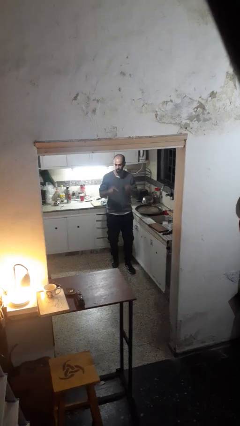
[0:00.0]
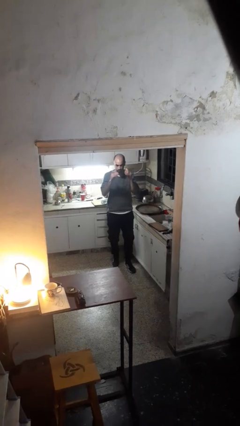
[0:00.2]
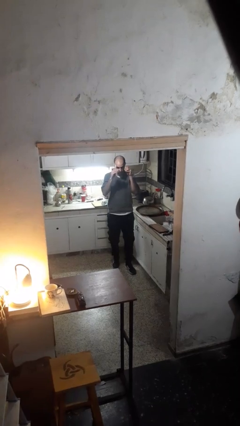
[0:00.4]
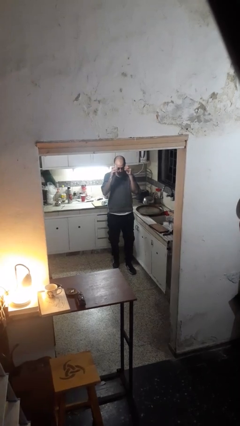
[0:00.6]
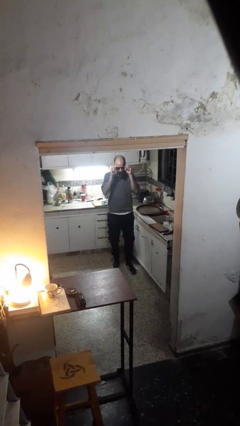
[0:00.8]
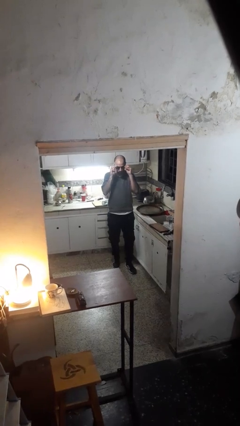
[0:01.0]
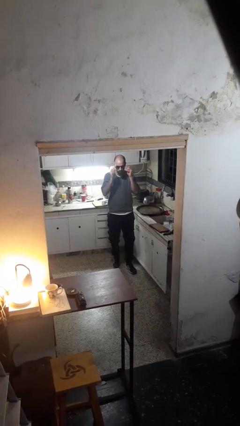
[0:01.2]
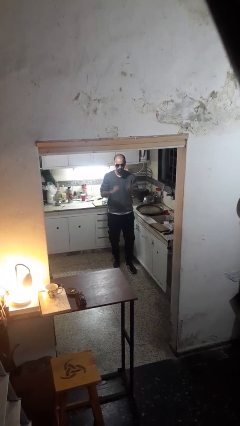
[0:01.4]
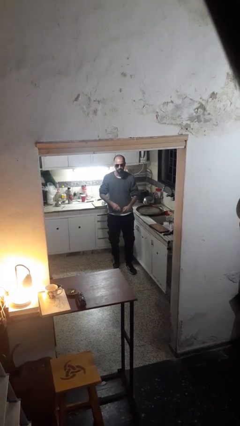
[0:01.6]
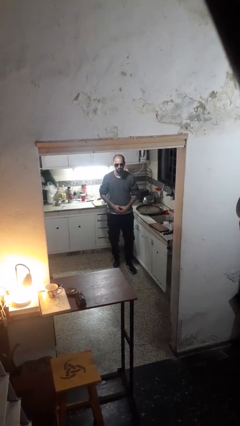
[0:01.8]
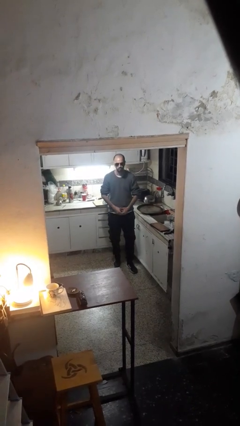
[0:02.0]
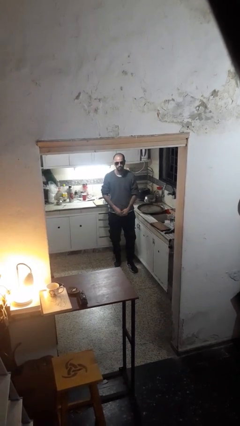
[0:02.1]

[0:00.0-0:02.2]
person puts on sunglasses

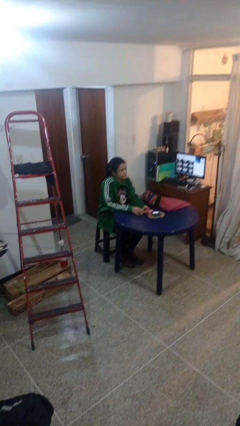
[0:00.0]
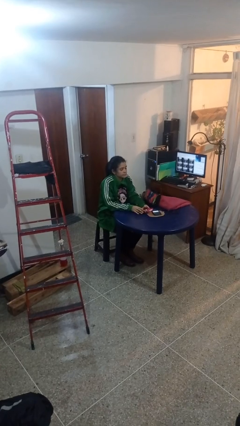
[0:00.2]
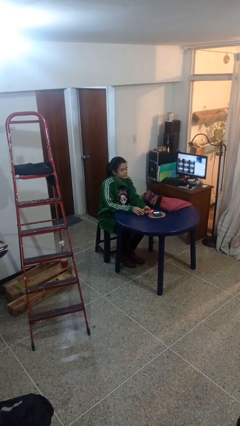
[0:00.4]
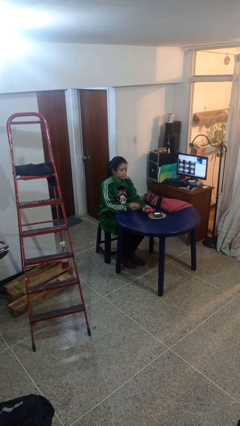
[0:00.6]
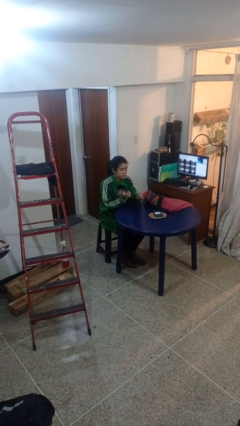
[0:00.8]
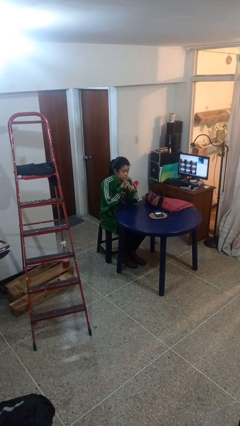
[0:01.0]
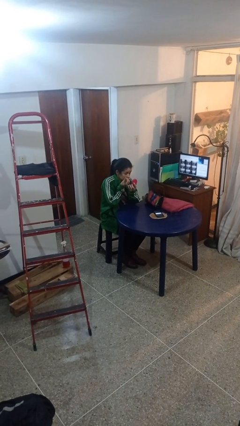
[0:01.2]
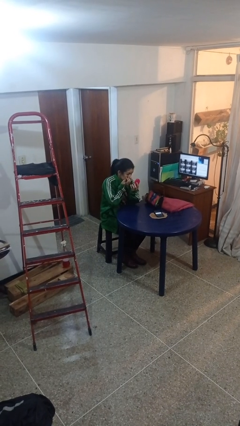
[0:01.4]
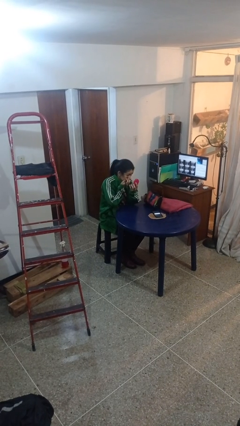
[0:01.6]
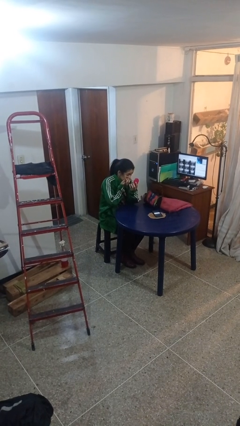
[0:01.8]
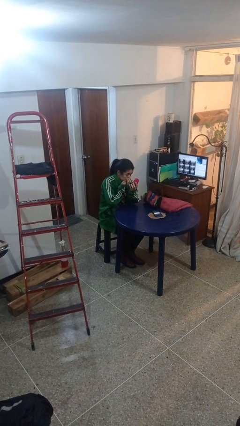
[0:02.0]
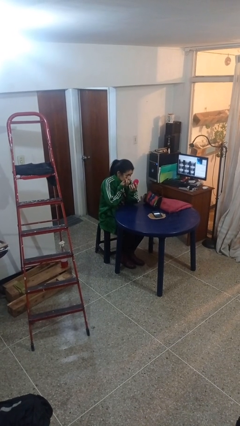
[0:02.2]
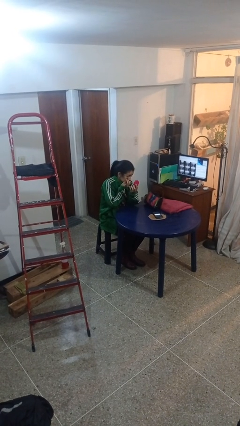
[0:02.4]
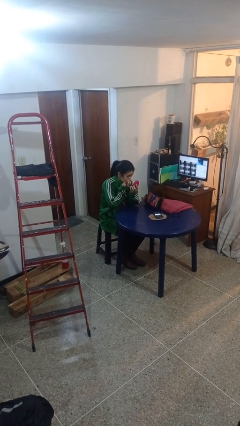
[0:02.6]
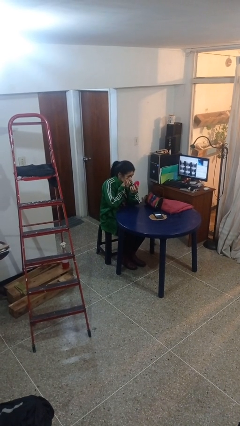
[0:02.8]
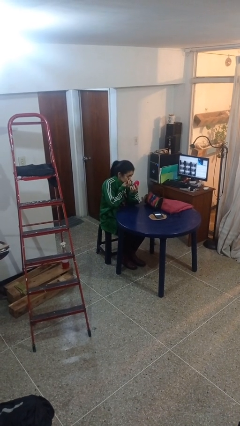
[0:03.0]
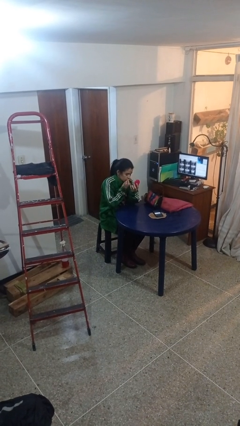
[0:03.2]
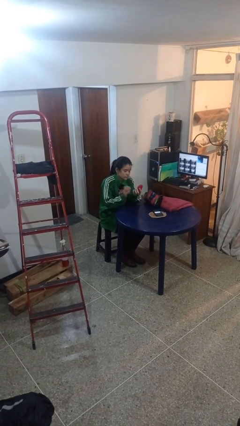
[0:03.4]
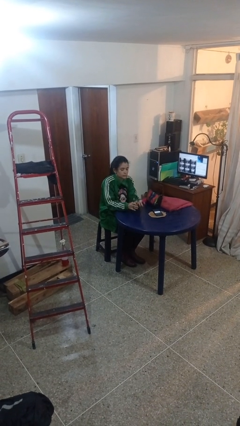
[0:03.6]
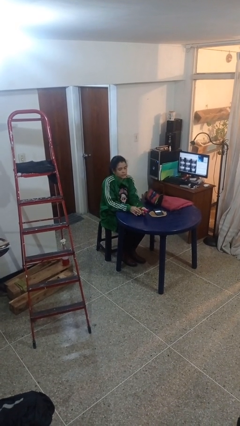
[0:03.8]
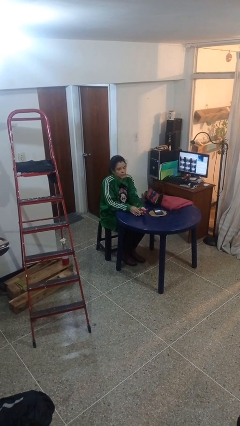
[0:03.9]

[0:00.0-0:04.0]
person applies eye makeup

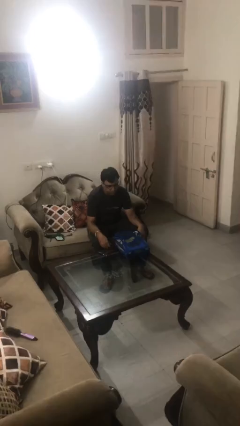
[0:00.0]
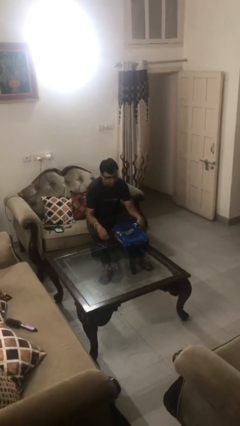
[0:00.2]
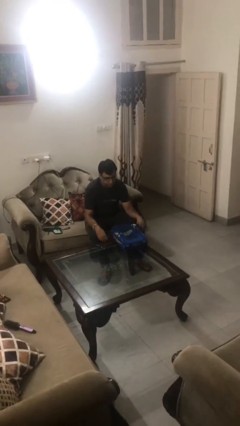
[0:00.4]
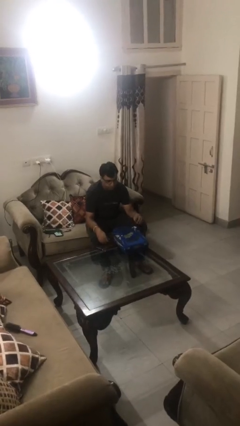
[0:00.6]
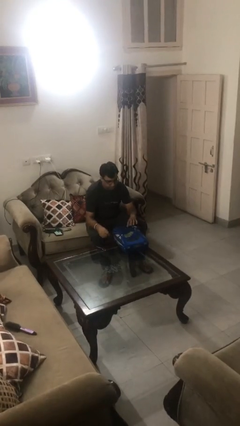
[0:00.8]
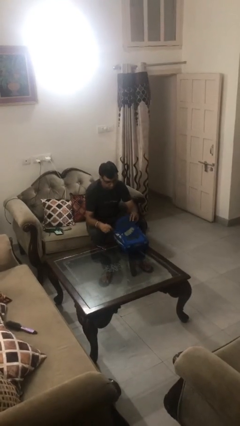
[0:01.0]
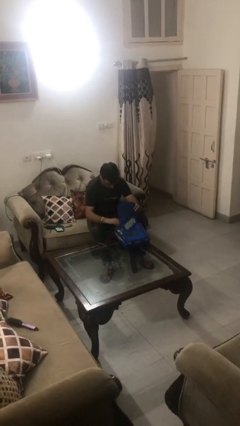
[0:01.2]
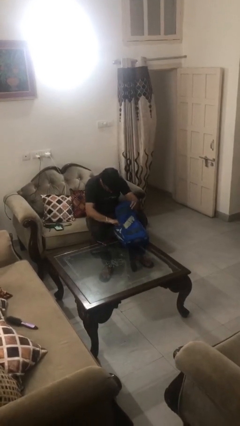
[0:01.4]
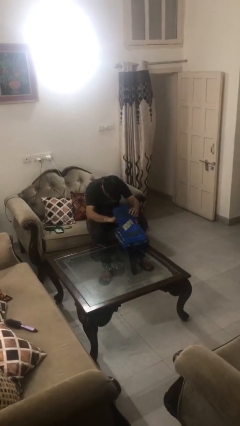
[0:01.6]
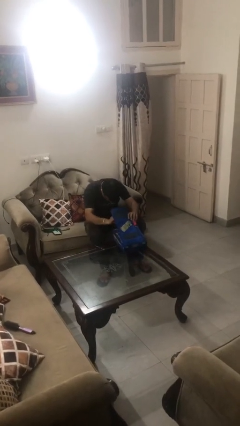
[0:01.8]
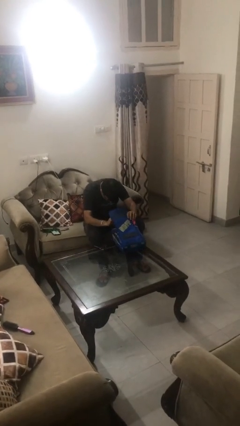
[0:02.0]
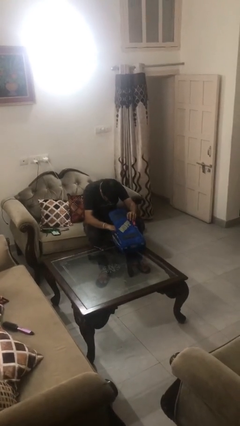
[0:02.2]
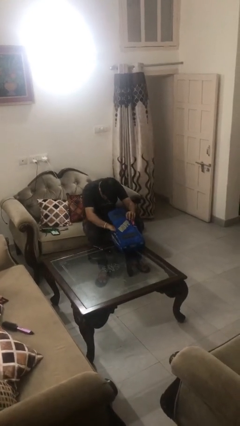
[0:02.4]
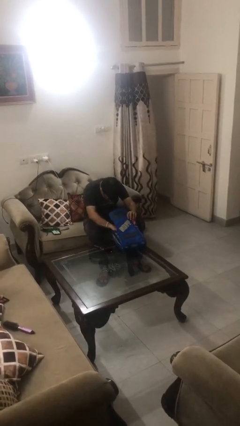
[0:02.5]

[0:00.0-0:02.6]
person searches in backpack

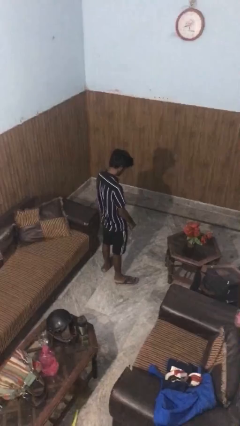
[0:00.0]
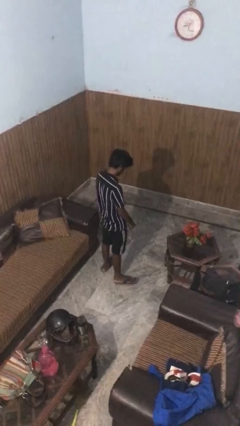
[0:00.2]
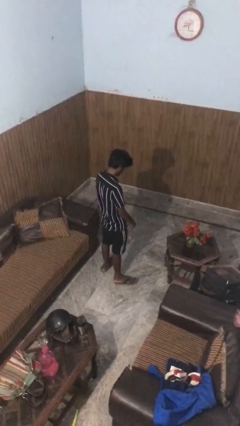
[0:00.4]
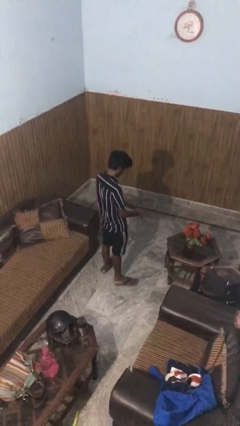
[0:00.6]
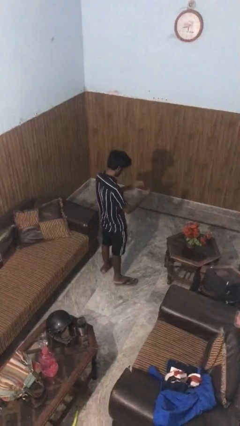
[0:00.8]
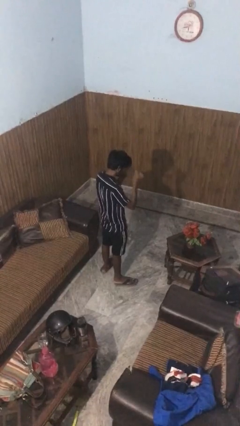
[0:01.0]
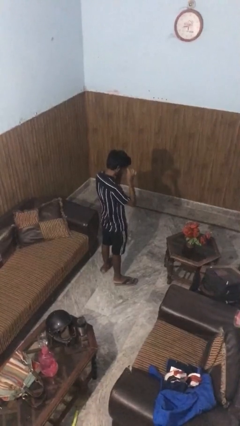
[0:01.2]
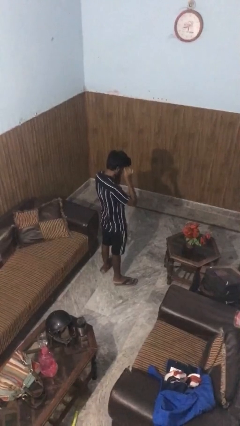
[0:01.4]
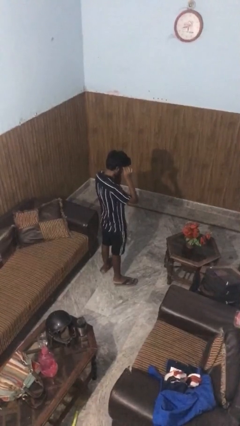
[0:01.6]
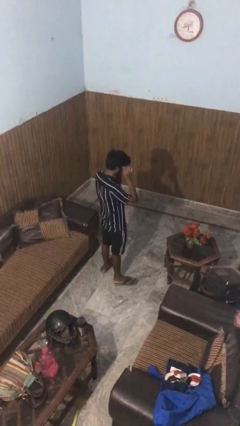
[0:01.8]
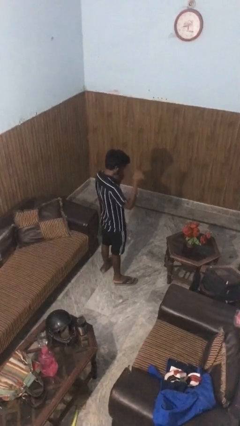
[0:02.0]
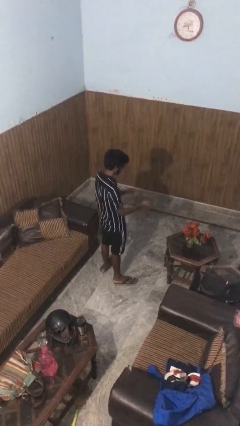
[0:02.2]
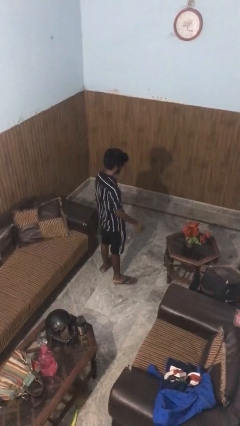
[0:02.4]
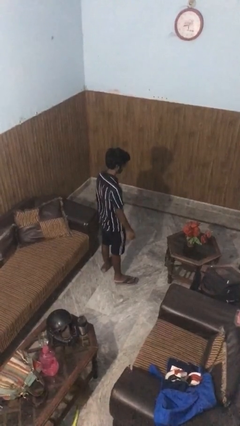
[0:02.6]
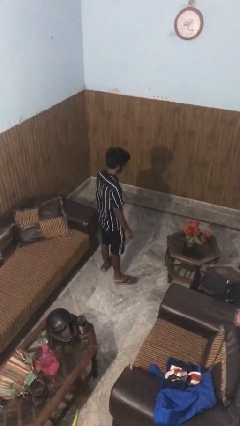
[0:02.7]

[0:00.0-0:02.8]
person puts on glasses

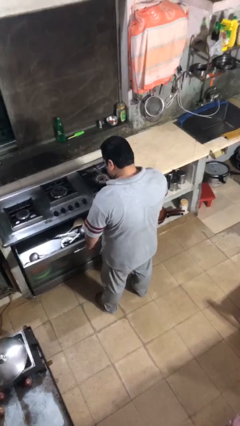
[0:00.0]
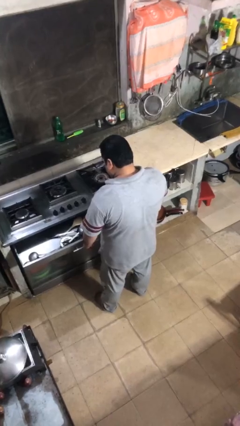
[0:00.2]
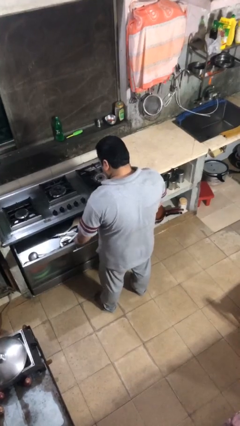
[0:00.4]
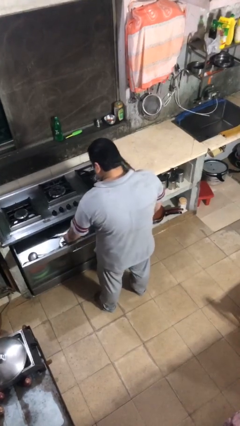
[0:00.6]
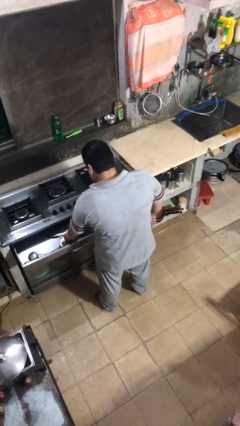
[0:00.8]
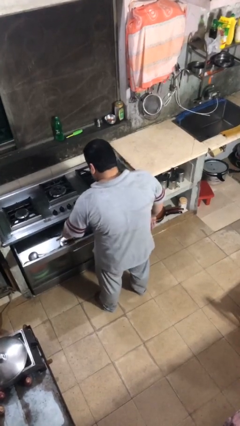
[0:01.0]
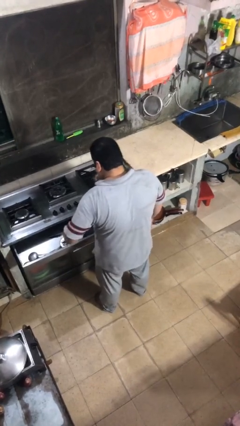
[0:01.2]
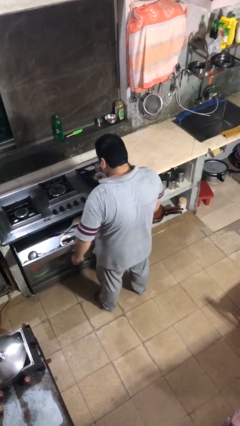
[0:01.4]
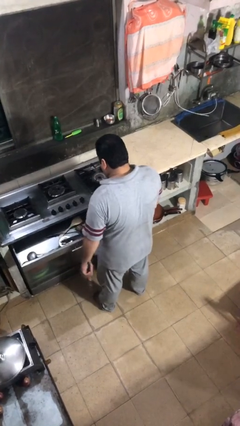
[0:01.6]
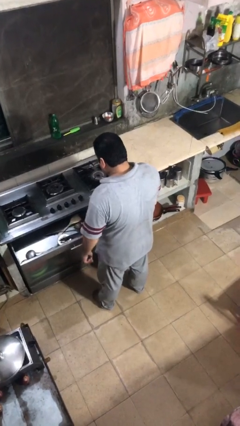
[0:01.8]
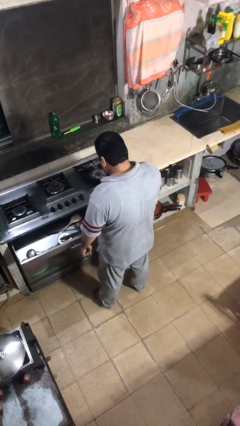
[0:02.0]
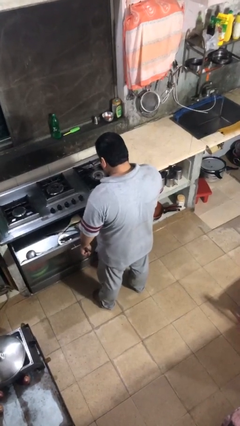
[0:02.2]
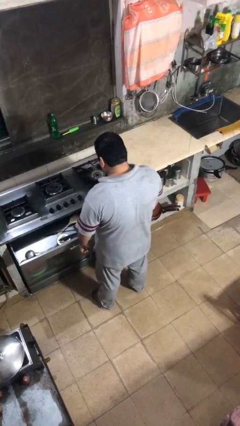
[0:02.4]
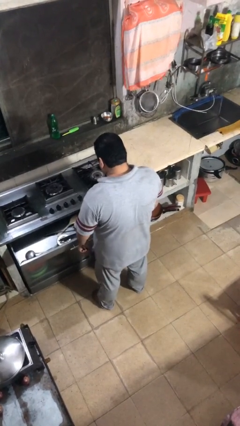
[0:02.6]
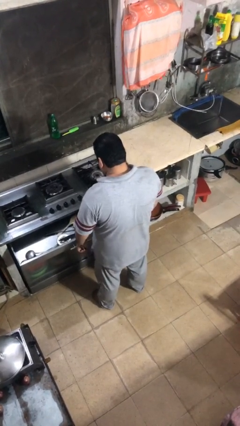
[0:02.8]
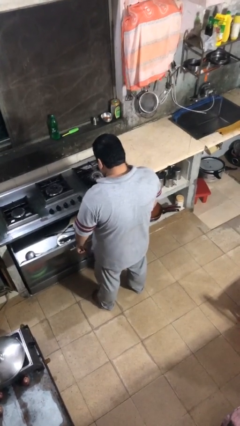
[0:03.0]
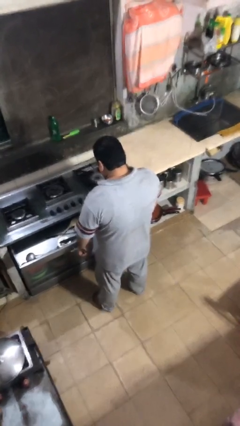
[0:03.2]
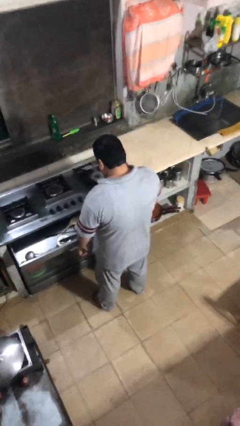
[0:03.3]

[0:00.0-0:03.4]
person takes object from kitchen drawer

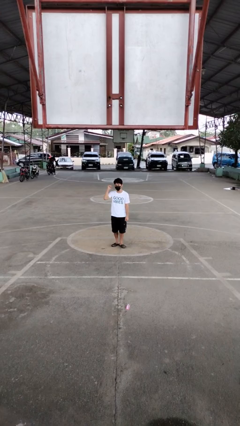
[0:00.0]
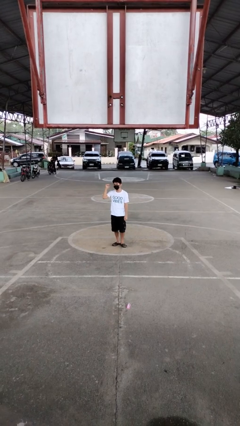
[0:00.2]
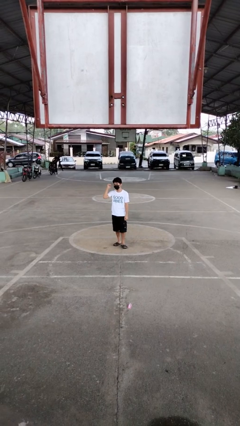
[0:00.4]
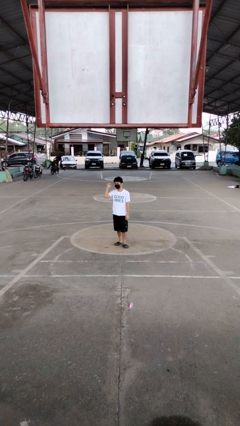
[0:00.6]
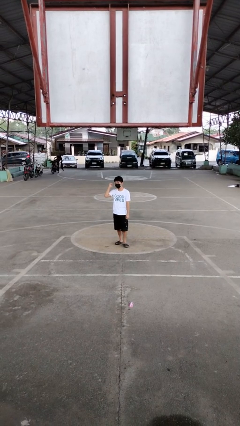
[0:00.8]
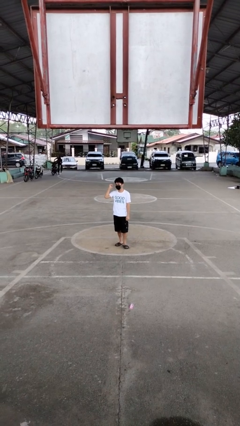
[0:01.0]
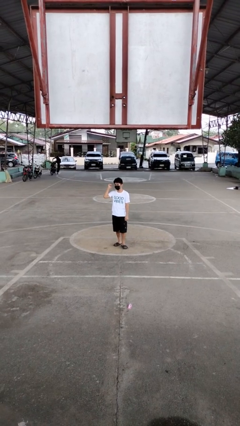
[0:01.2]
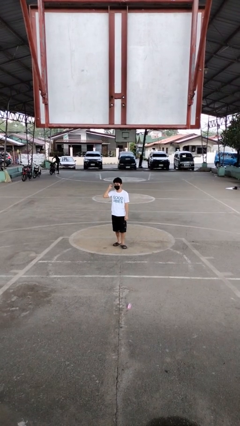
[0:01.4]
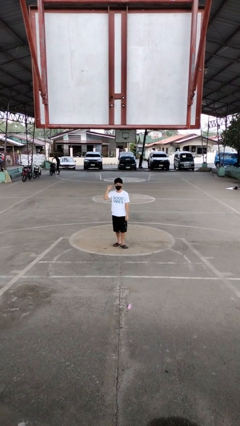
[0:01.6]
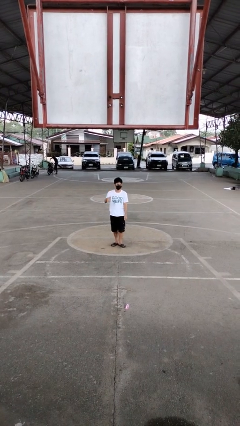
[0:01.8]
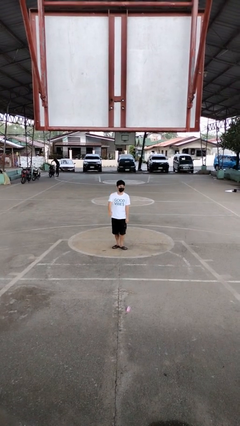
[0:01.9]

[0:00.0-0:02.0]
person gestures behind me

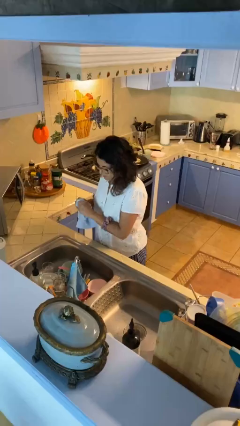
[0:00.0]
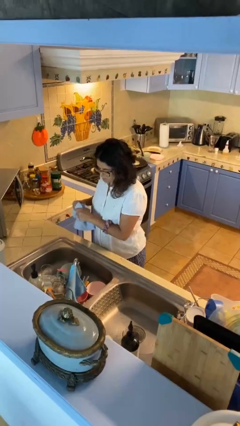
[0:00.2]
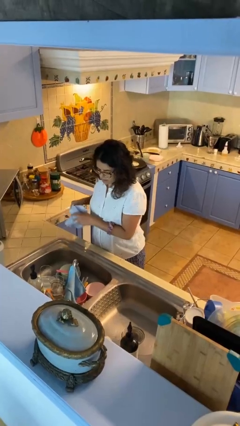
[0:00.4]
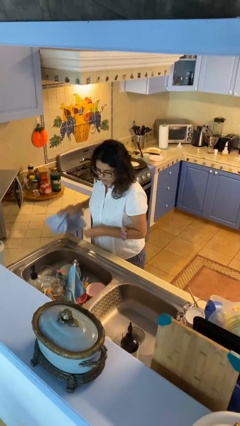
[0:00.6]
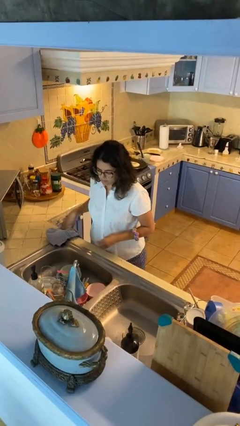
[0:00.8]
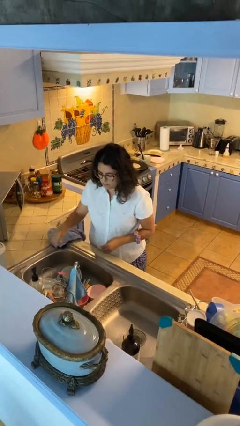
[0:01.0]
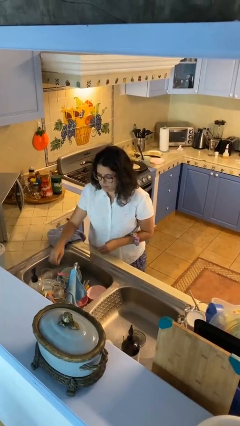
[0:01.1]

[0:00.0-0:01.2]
person dries hands with towel
